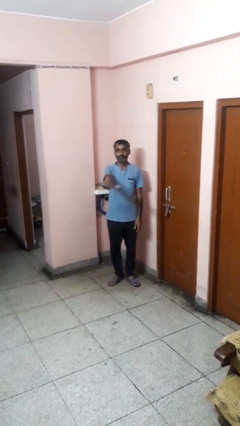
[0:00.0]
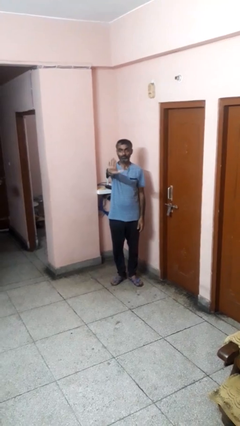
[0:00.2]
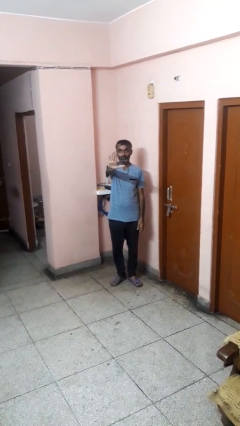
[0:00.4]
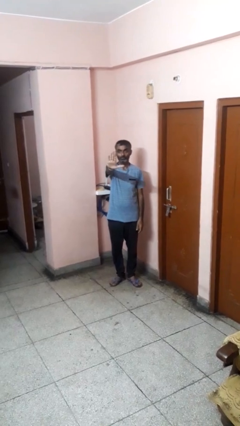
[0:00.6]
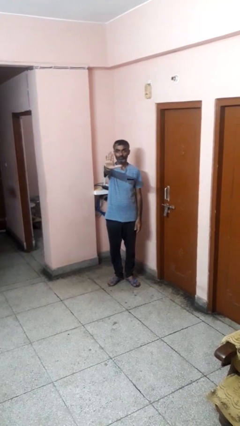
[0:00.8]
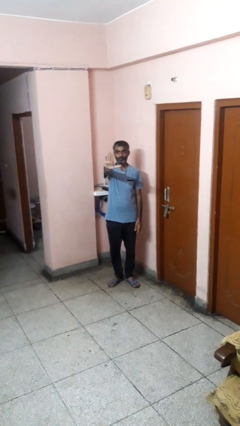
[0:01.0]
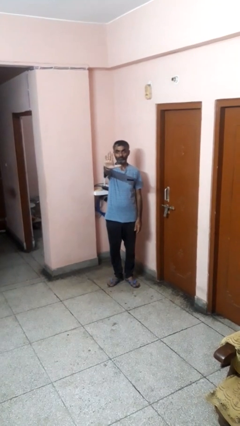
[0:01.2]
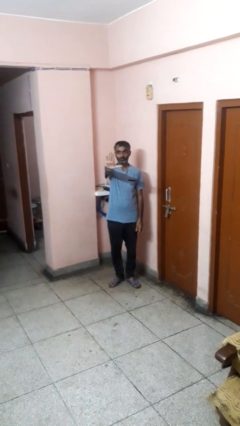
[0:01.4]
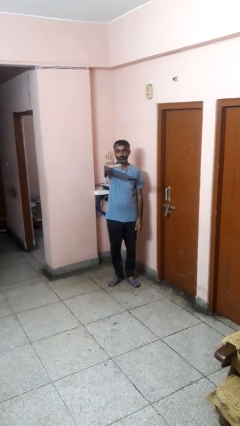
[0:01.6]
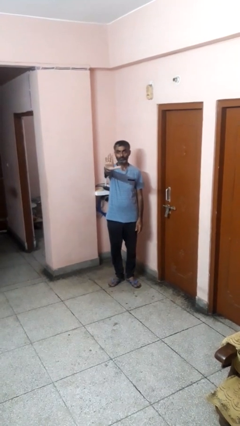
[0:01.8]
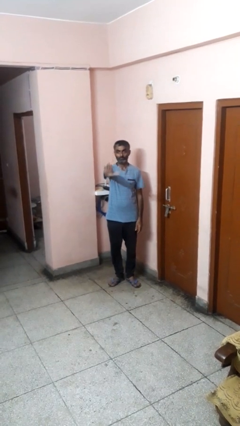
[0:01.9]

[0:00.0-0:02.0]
person gestures stop

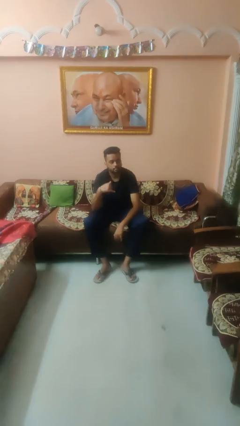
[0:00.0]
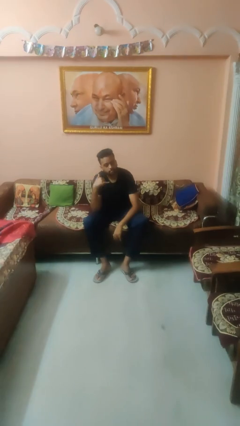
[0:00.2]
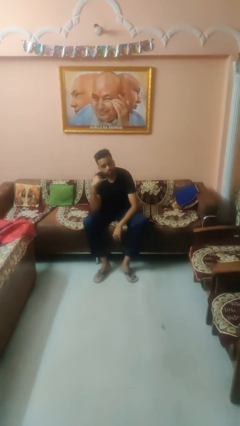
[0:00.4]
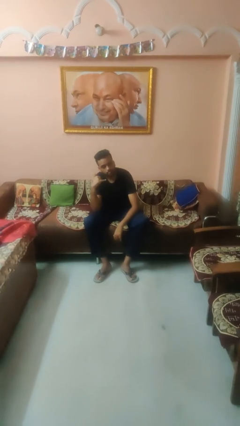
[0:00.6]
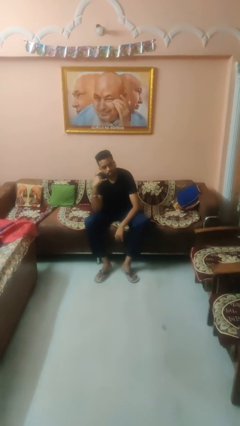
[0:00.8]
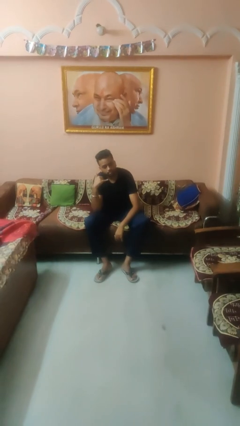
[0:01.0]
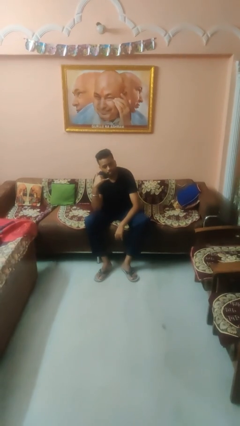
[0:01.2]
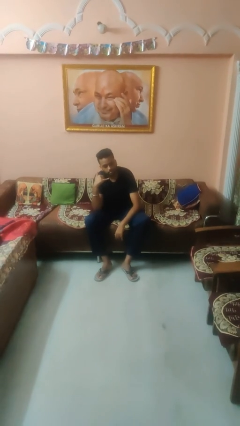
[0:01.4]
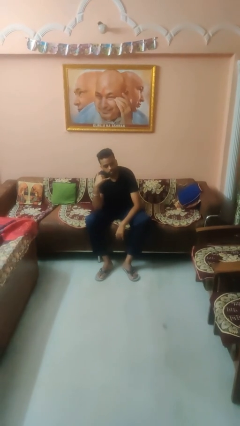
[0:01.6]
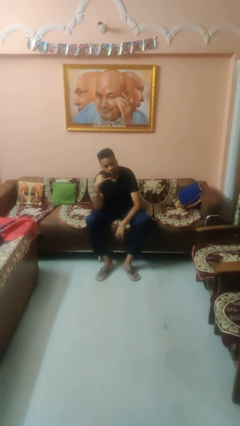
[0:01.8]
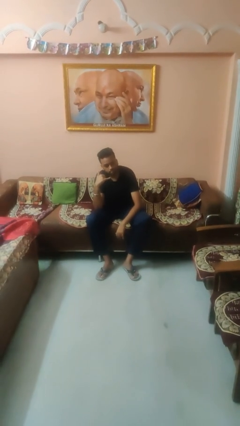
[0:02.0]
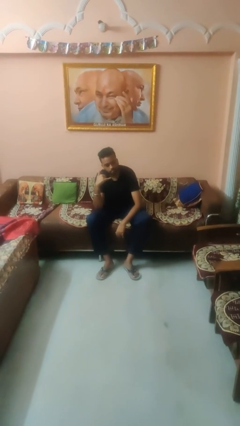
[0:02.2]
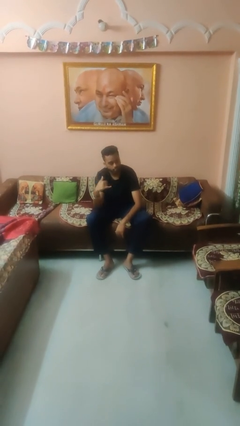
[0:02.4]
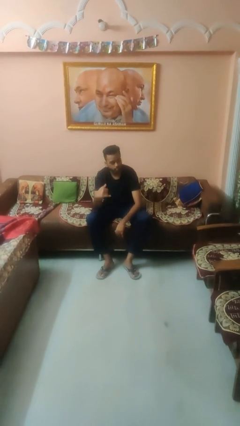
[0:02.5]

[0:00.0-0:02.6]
person gestures call me

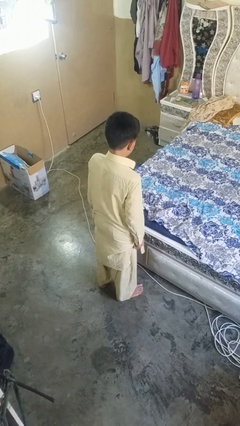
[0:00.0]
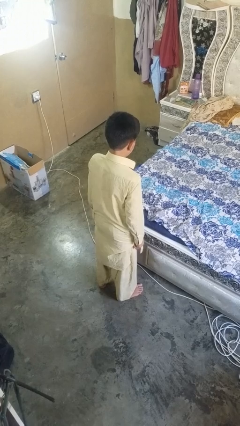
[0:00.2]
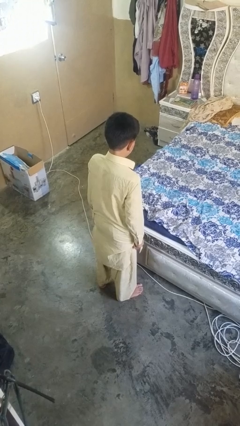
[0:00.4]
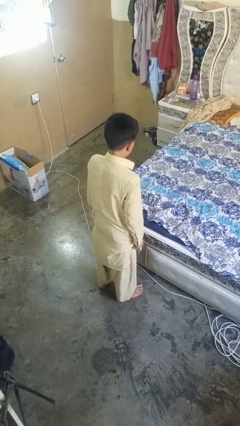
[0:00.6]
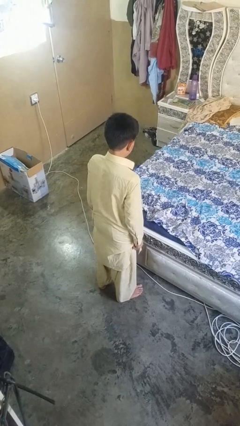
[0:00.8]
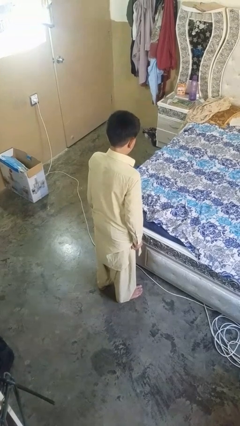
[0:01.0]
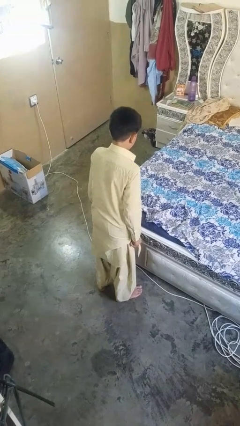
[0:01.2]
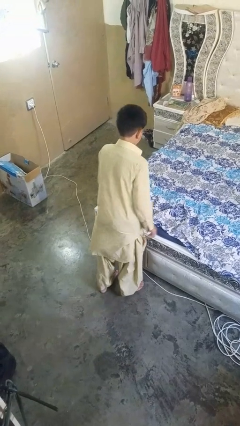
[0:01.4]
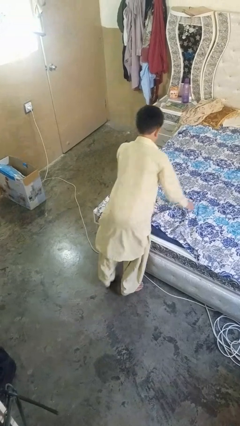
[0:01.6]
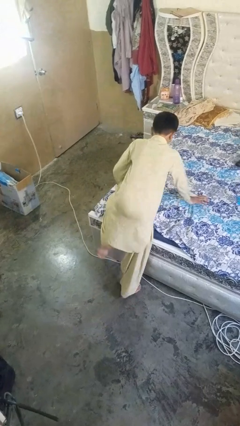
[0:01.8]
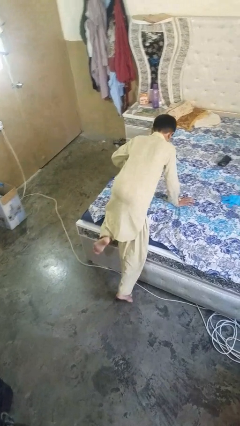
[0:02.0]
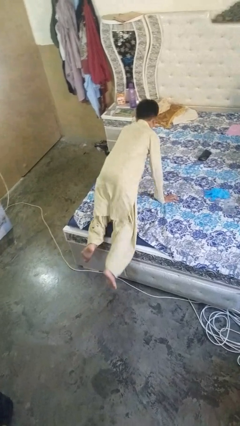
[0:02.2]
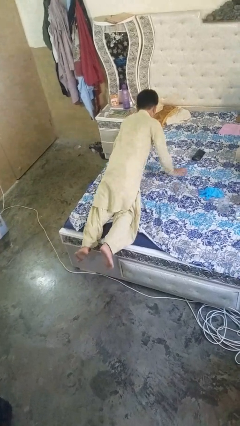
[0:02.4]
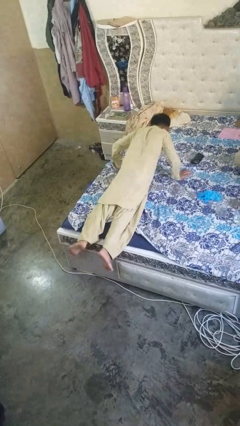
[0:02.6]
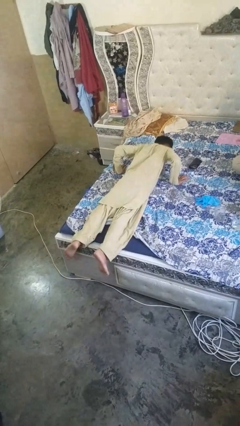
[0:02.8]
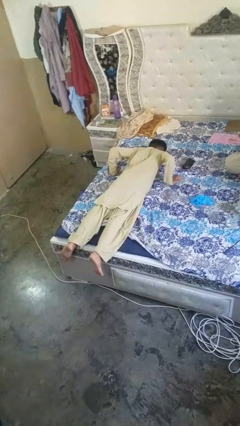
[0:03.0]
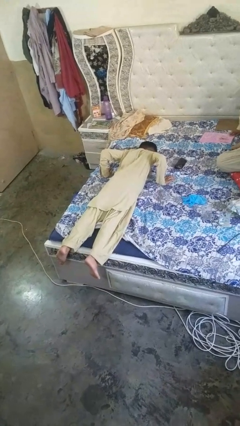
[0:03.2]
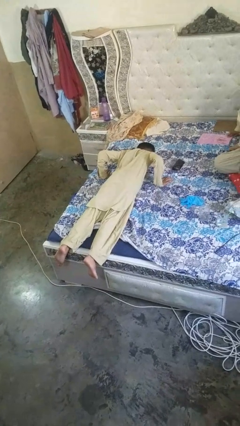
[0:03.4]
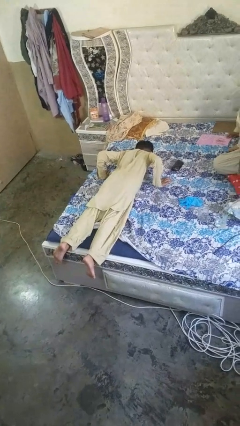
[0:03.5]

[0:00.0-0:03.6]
person lies down on bed

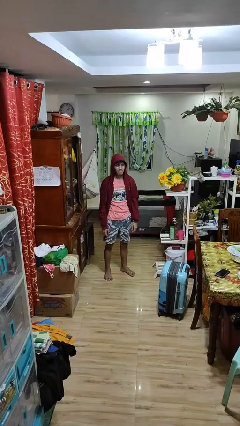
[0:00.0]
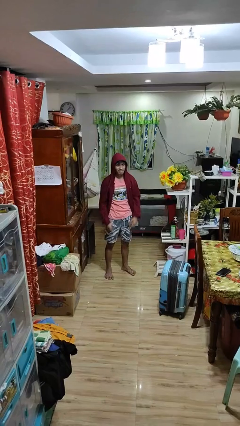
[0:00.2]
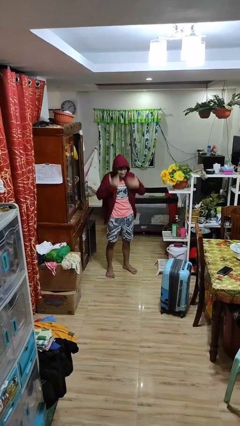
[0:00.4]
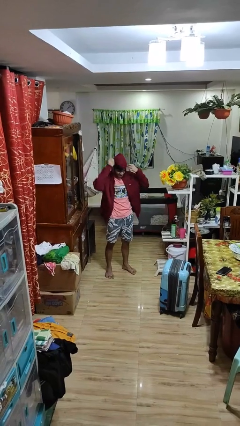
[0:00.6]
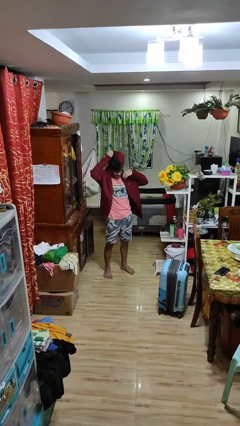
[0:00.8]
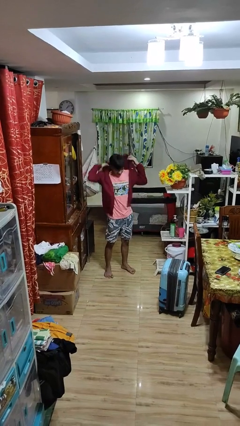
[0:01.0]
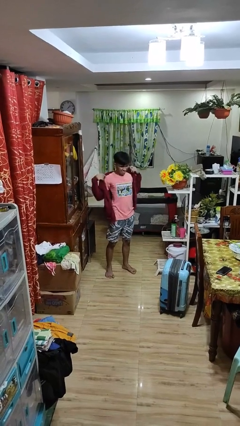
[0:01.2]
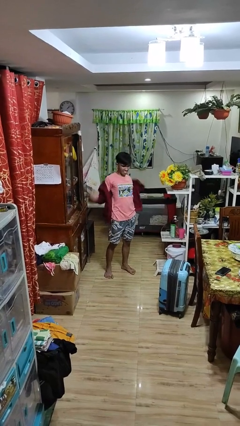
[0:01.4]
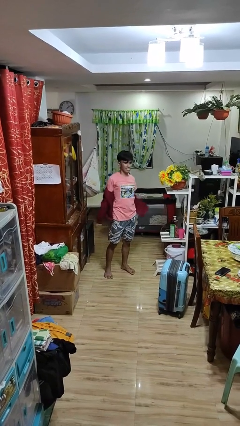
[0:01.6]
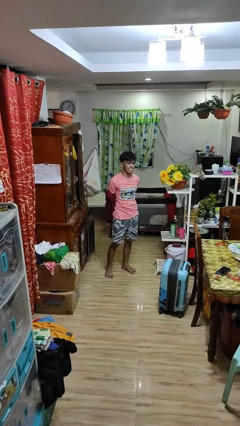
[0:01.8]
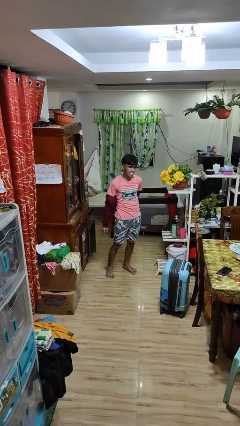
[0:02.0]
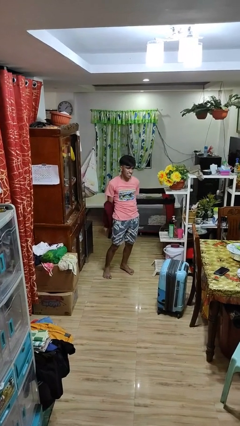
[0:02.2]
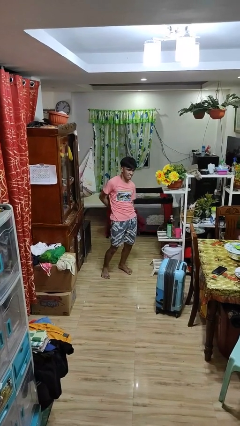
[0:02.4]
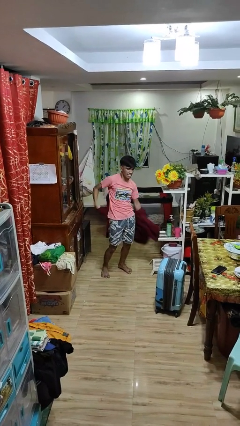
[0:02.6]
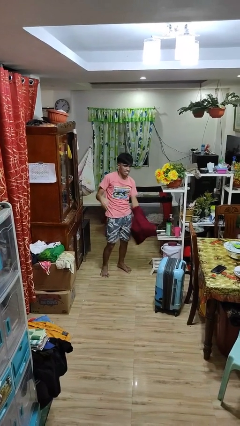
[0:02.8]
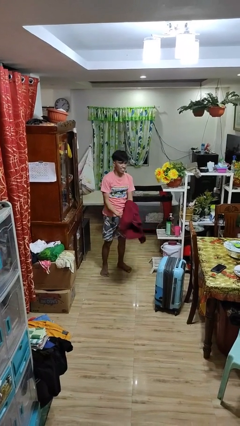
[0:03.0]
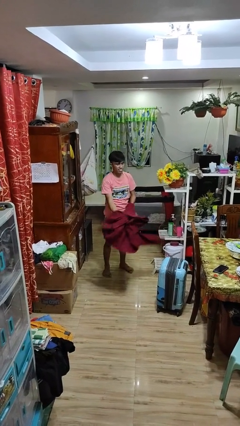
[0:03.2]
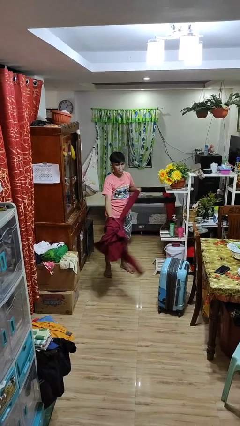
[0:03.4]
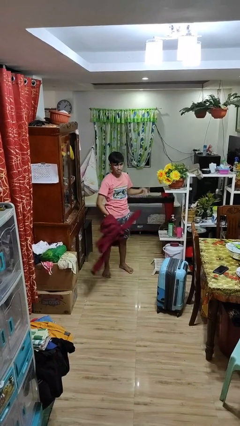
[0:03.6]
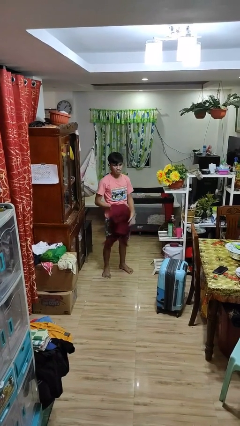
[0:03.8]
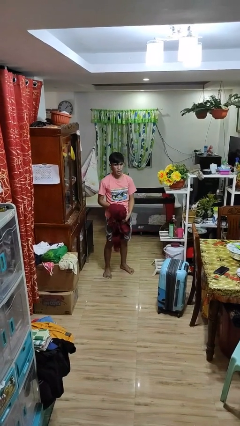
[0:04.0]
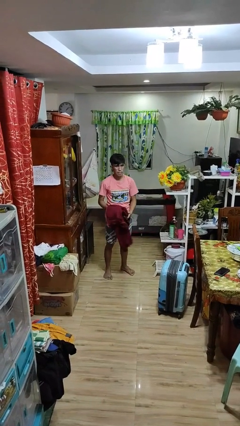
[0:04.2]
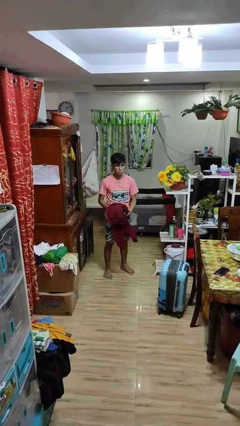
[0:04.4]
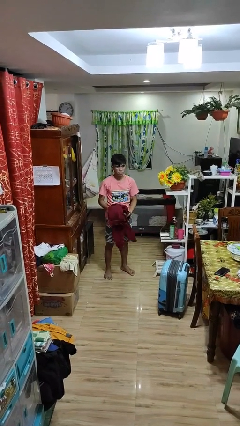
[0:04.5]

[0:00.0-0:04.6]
person takes off hoodie

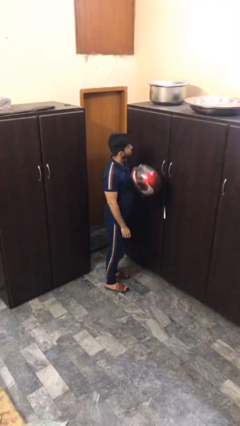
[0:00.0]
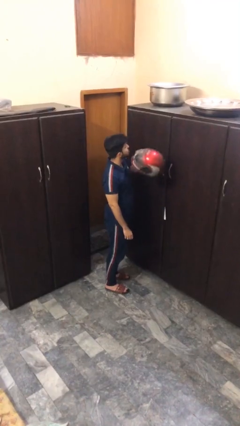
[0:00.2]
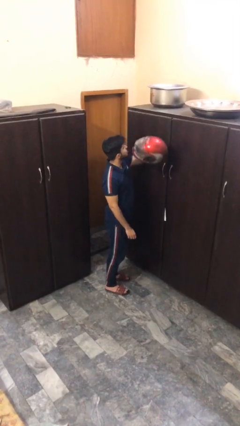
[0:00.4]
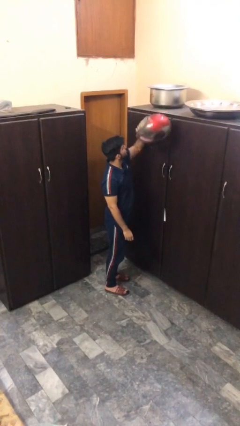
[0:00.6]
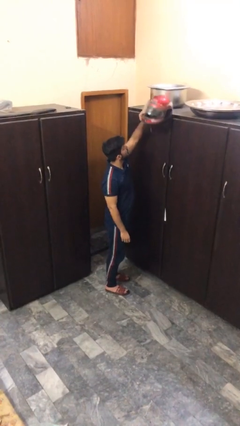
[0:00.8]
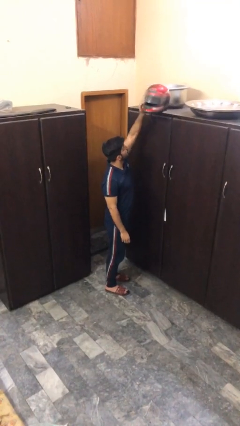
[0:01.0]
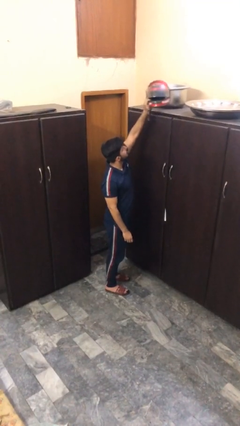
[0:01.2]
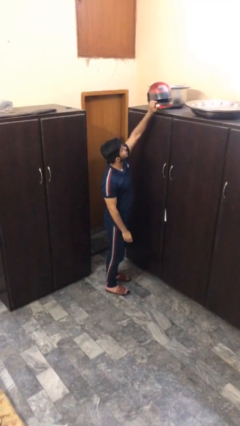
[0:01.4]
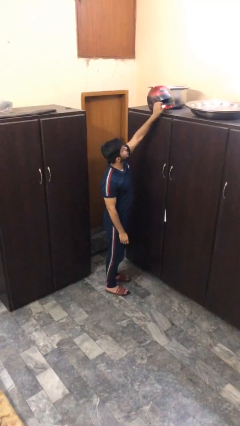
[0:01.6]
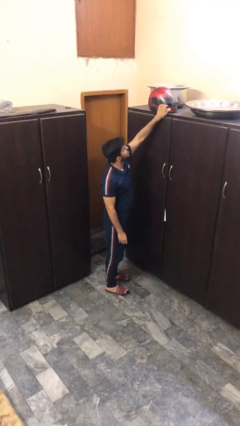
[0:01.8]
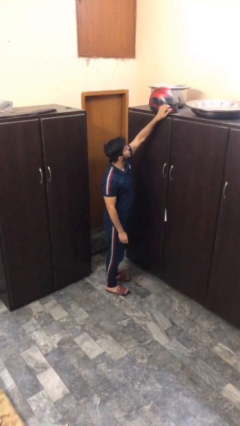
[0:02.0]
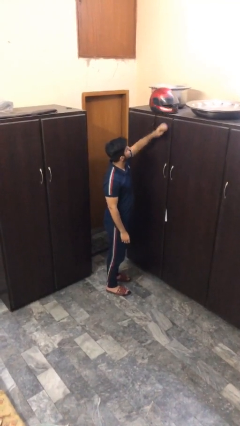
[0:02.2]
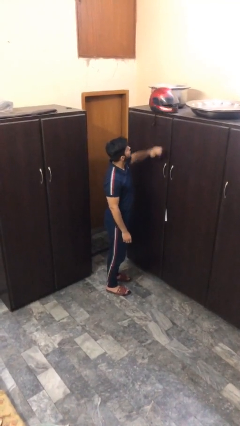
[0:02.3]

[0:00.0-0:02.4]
person puts down object on shelf

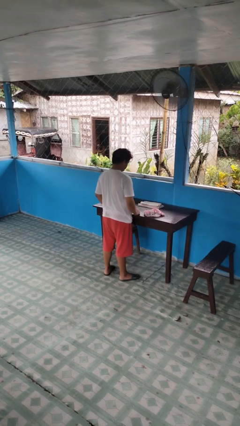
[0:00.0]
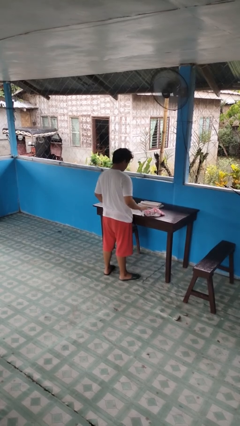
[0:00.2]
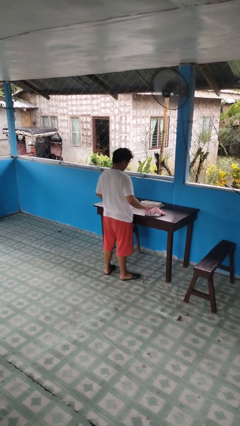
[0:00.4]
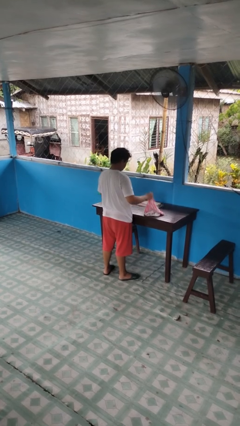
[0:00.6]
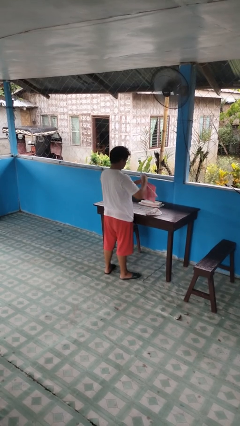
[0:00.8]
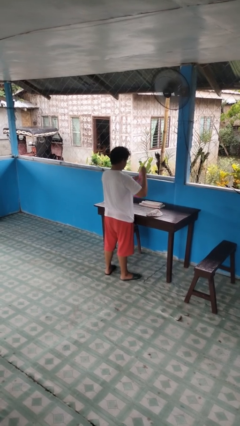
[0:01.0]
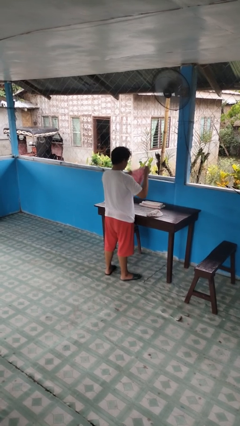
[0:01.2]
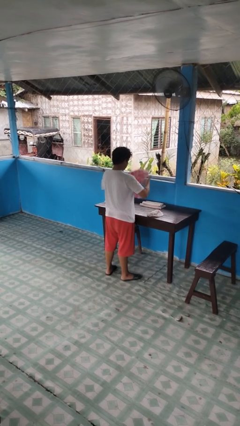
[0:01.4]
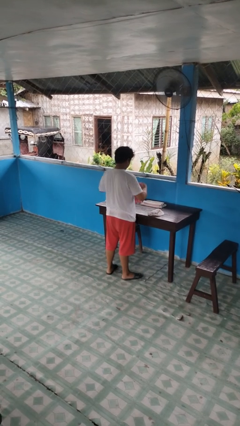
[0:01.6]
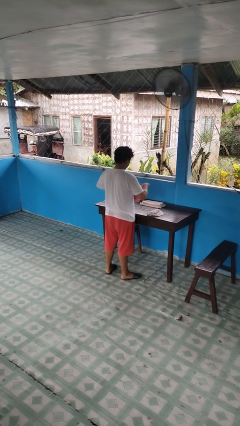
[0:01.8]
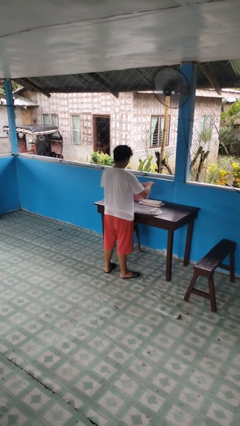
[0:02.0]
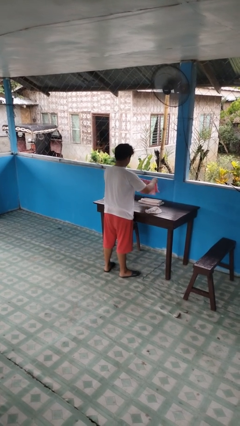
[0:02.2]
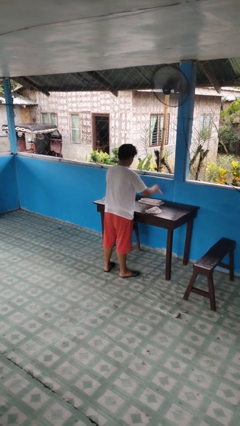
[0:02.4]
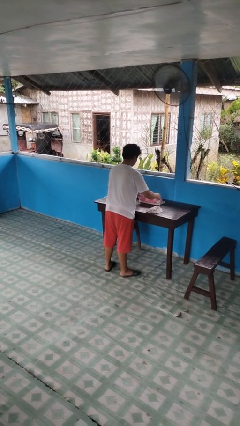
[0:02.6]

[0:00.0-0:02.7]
person folds towel
